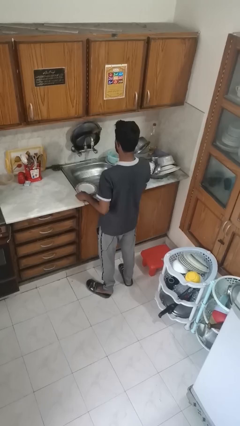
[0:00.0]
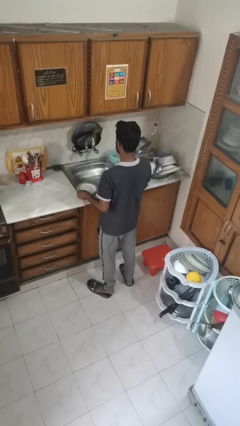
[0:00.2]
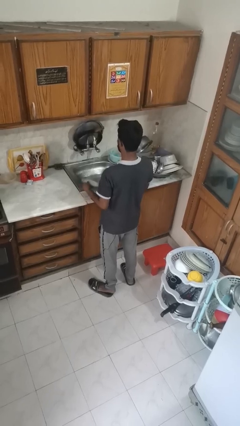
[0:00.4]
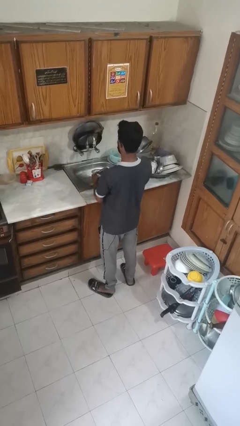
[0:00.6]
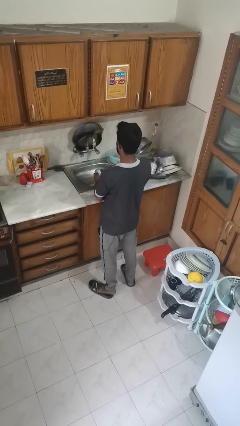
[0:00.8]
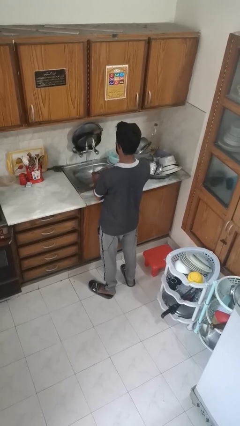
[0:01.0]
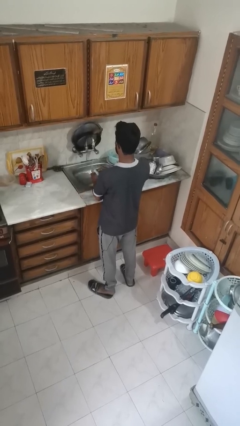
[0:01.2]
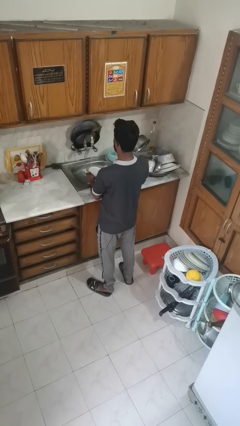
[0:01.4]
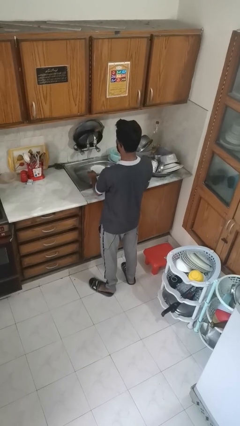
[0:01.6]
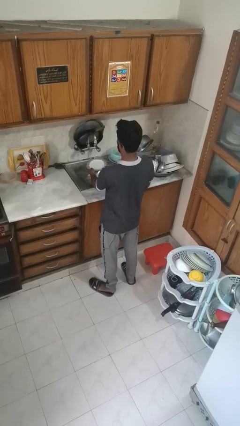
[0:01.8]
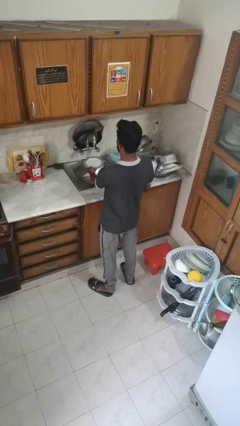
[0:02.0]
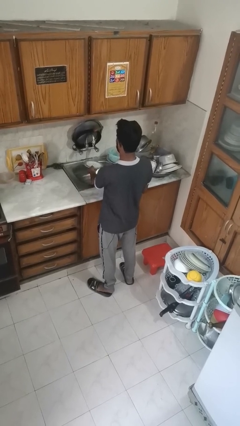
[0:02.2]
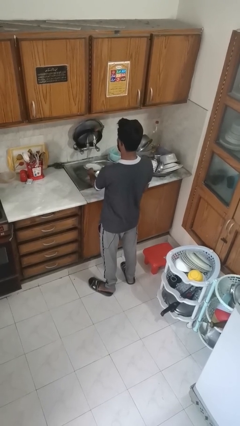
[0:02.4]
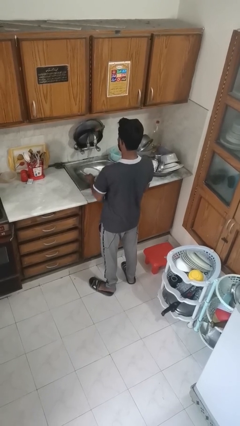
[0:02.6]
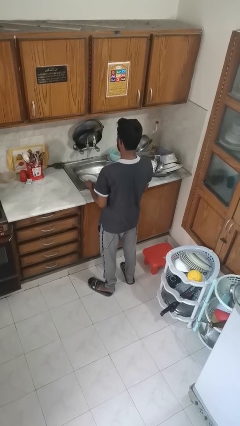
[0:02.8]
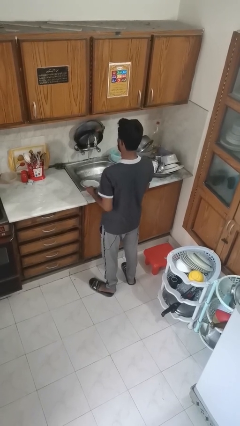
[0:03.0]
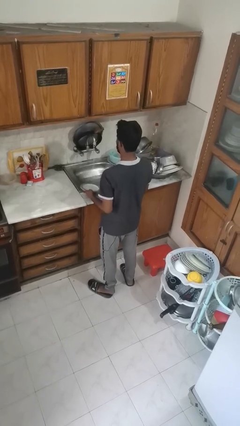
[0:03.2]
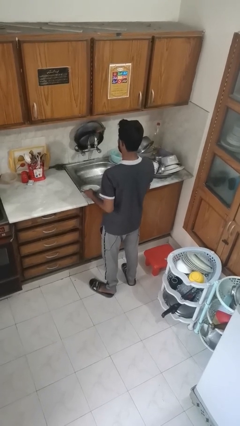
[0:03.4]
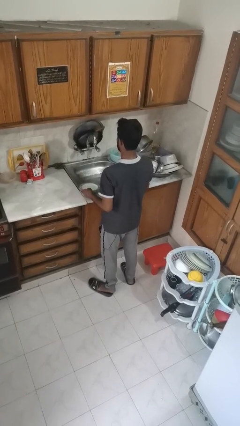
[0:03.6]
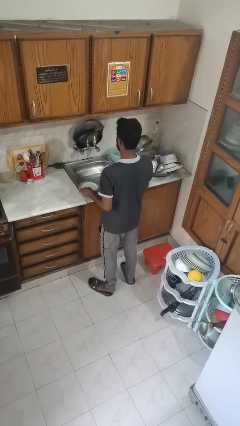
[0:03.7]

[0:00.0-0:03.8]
person washes dish

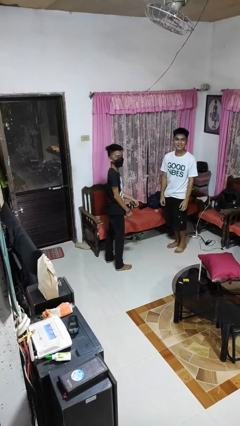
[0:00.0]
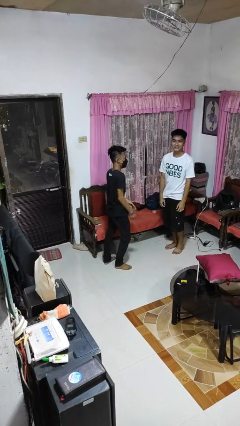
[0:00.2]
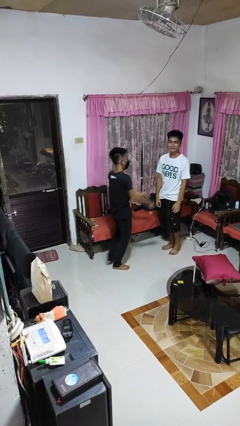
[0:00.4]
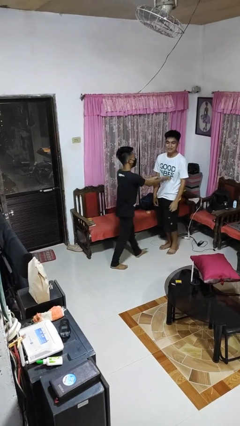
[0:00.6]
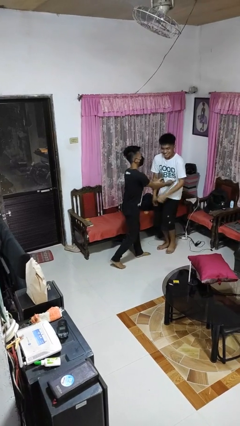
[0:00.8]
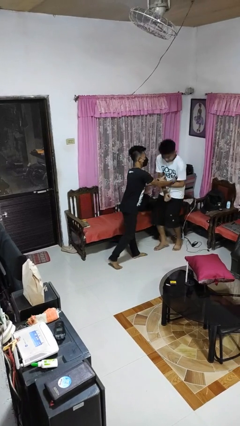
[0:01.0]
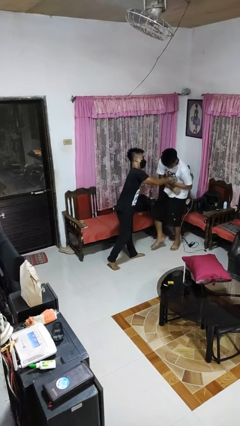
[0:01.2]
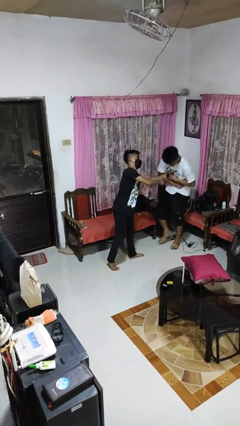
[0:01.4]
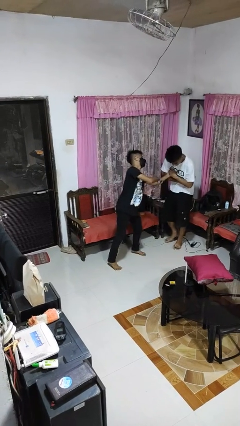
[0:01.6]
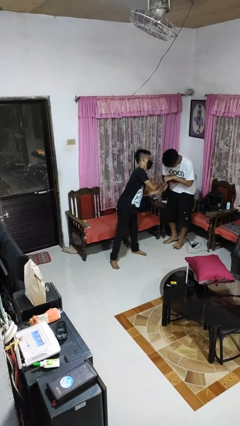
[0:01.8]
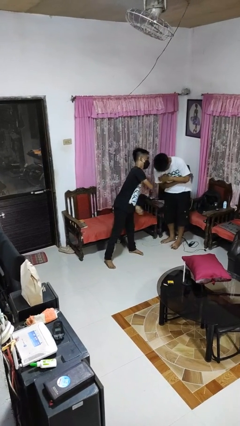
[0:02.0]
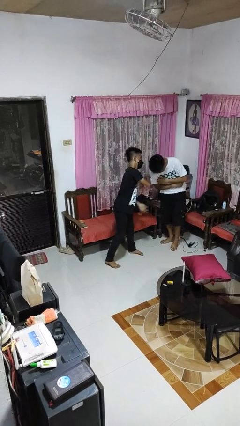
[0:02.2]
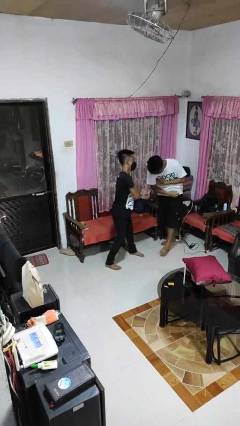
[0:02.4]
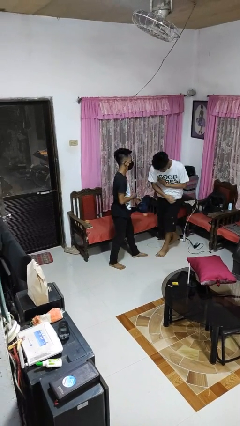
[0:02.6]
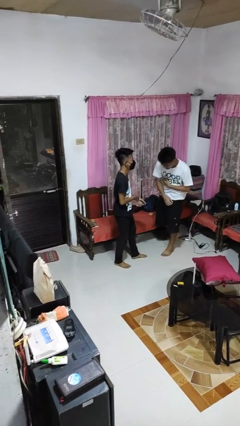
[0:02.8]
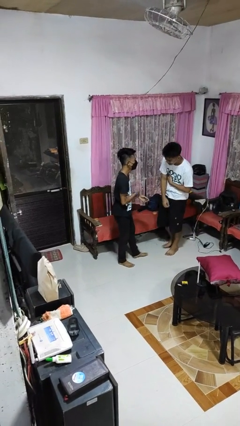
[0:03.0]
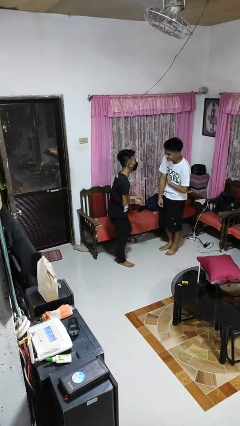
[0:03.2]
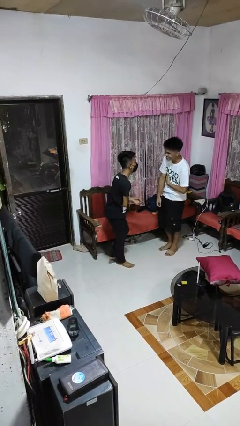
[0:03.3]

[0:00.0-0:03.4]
person tickles person

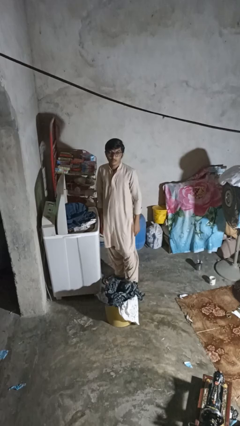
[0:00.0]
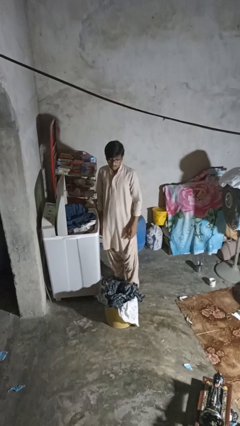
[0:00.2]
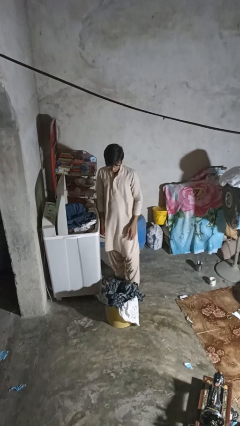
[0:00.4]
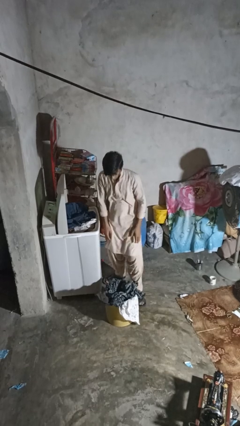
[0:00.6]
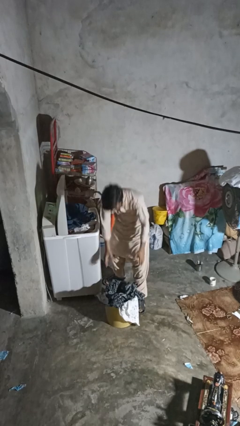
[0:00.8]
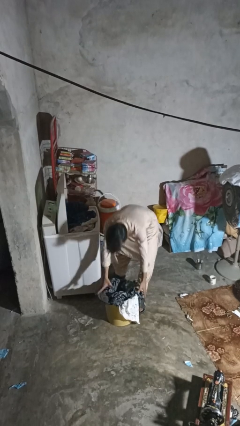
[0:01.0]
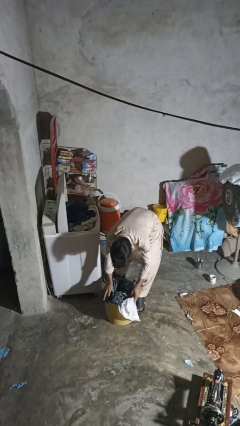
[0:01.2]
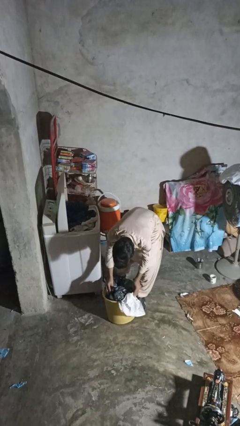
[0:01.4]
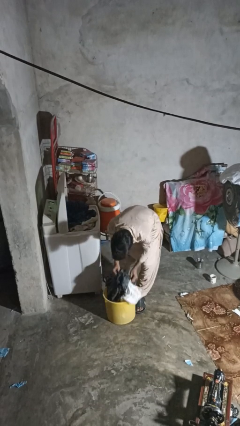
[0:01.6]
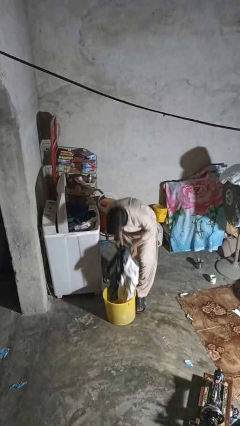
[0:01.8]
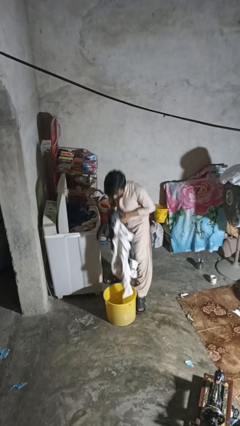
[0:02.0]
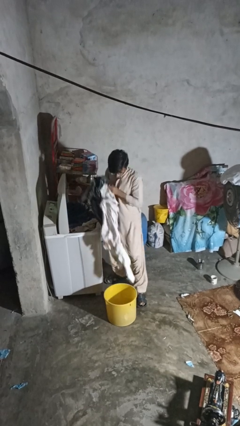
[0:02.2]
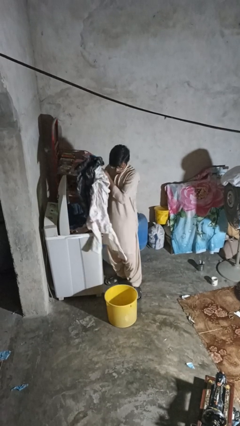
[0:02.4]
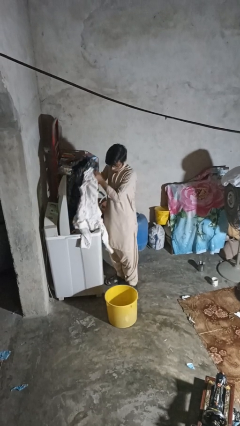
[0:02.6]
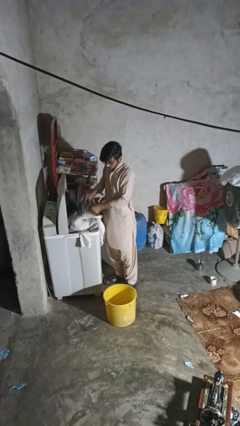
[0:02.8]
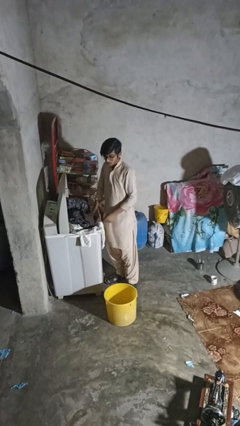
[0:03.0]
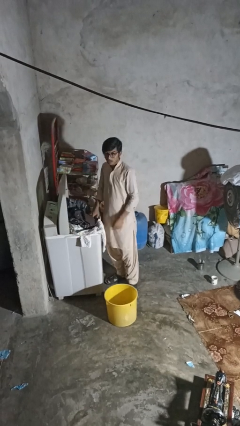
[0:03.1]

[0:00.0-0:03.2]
person loads clotheswasher

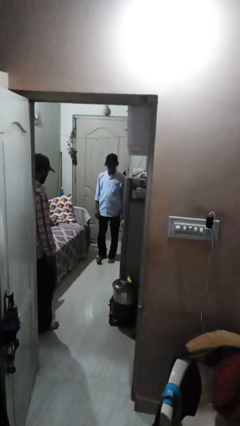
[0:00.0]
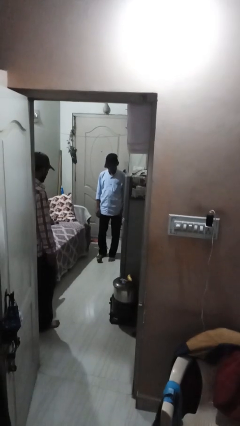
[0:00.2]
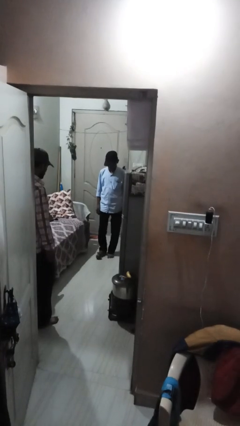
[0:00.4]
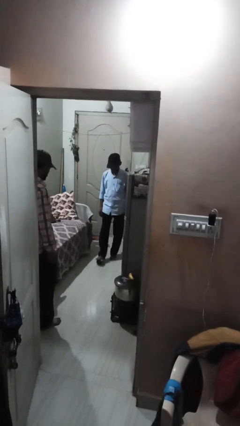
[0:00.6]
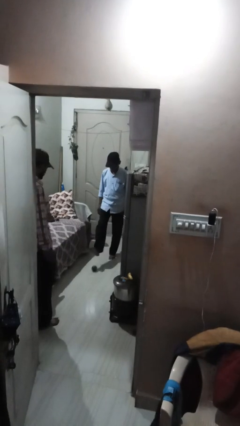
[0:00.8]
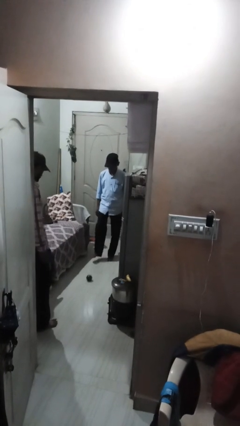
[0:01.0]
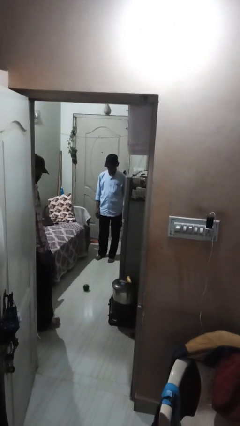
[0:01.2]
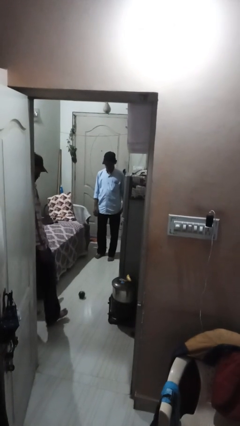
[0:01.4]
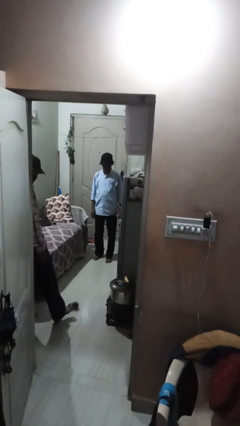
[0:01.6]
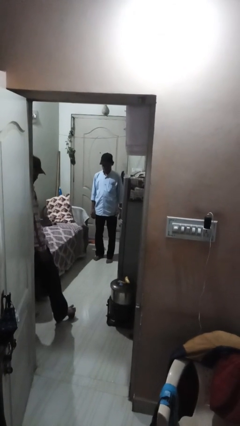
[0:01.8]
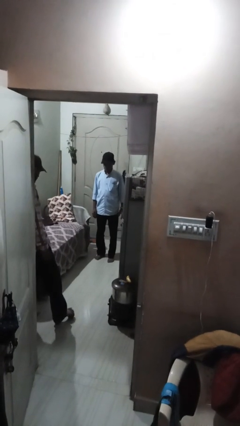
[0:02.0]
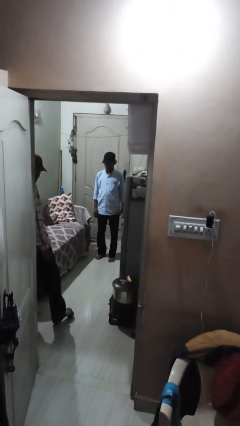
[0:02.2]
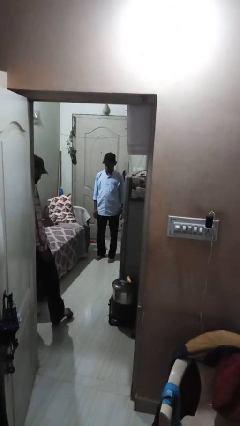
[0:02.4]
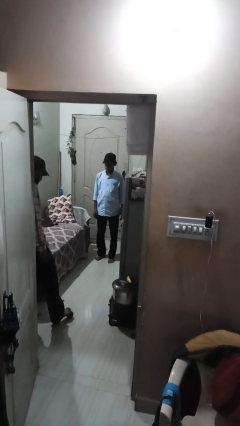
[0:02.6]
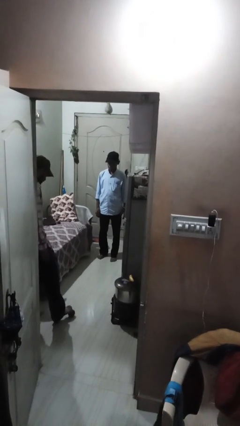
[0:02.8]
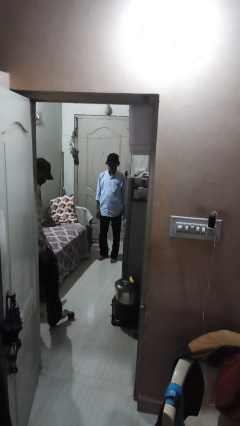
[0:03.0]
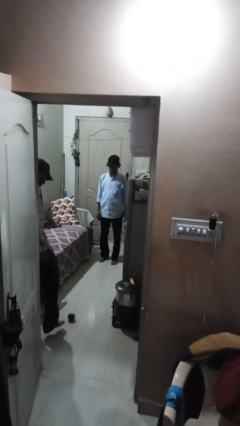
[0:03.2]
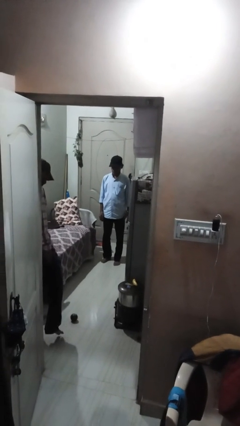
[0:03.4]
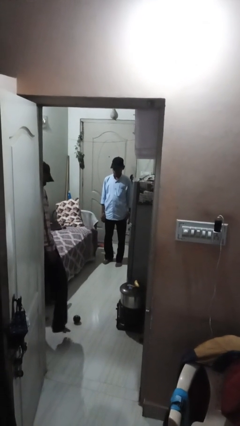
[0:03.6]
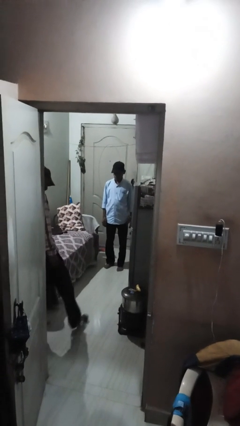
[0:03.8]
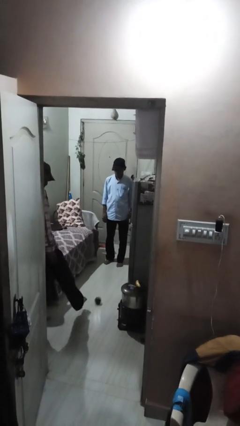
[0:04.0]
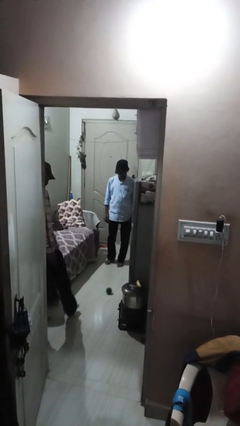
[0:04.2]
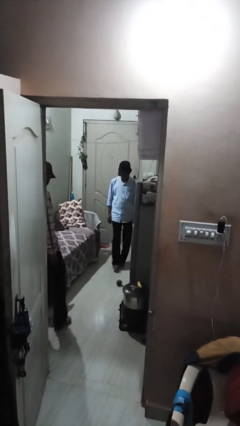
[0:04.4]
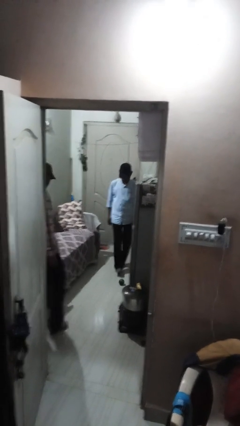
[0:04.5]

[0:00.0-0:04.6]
person kicks object to person

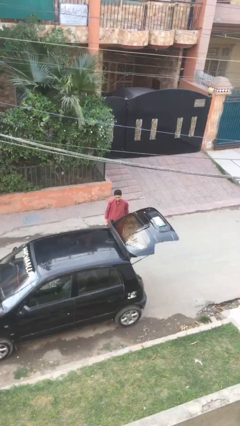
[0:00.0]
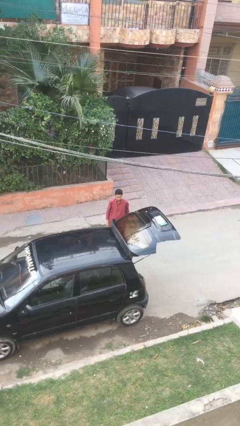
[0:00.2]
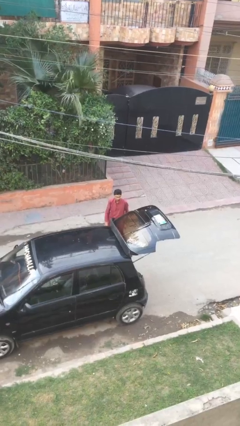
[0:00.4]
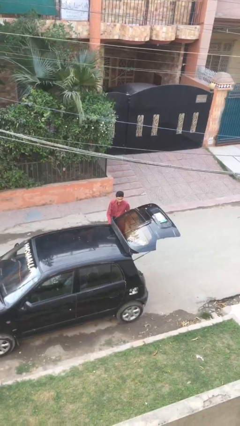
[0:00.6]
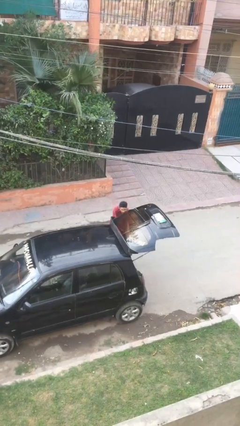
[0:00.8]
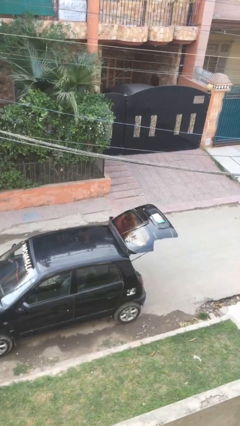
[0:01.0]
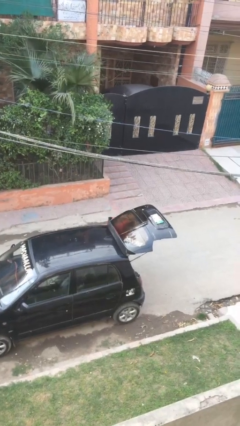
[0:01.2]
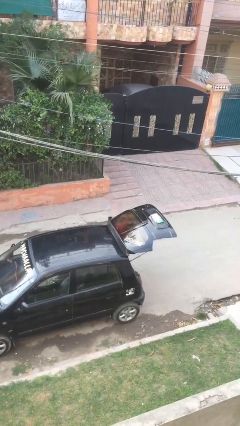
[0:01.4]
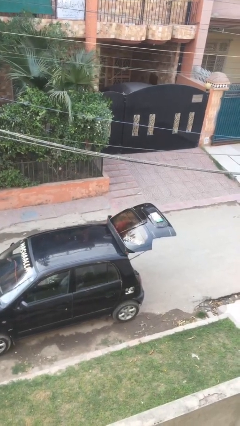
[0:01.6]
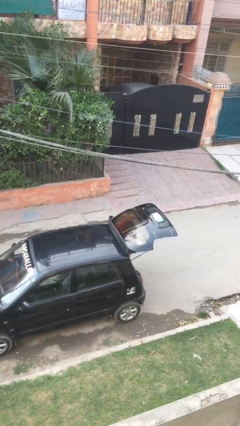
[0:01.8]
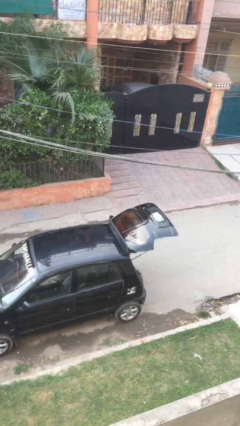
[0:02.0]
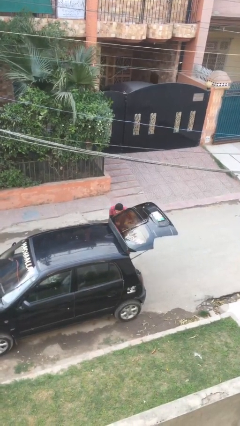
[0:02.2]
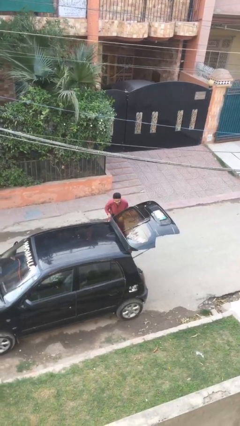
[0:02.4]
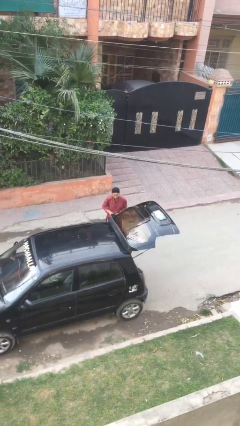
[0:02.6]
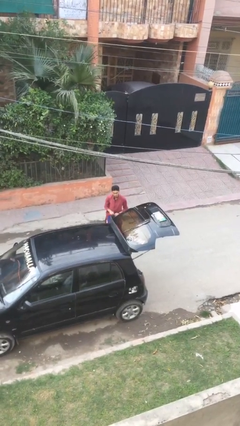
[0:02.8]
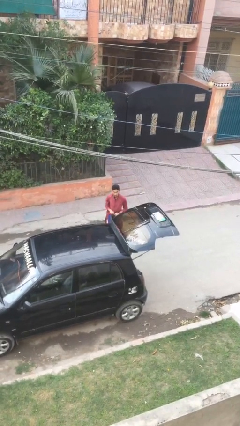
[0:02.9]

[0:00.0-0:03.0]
person unloads car
